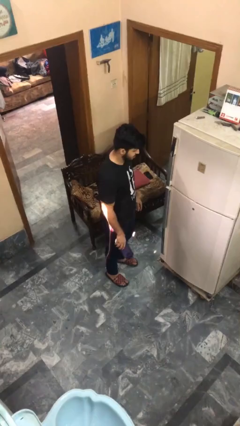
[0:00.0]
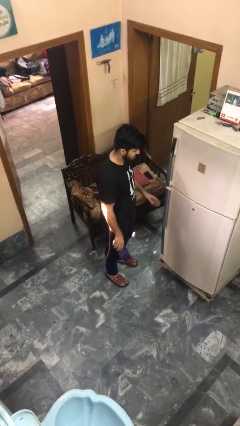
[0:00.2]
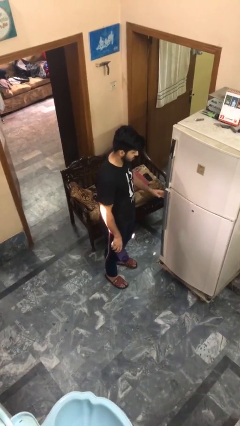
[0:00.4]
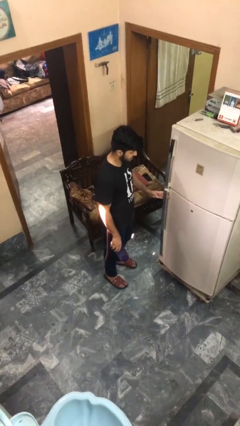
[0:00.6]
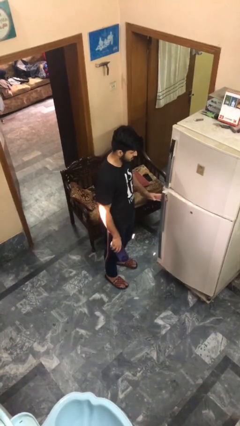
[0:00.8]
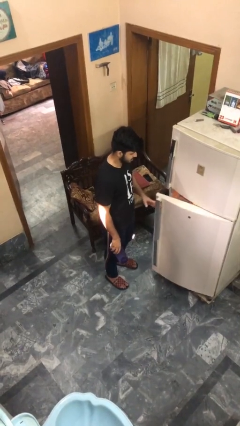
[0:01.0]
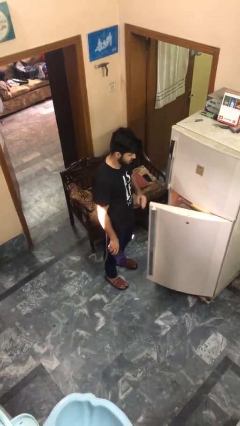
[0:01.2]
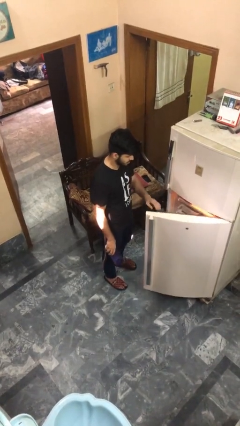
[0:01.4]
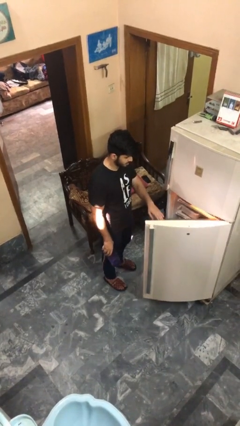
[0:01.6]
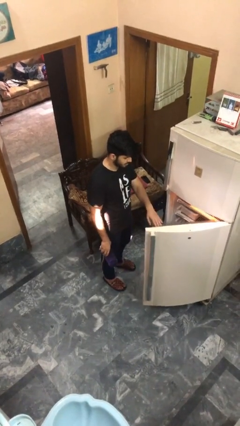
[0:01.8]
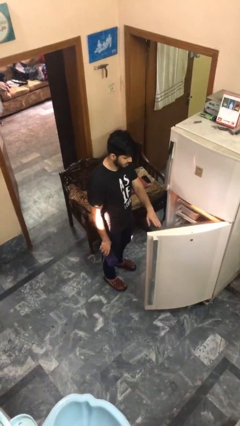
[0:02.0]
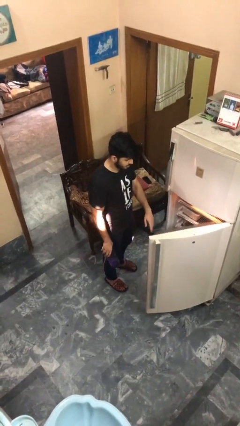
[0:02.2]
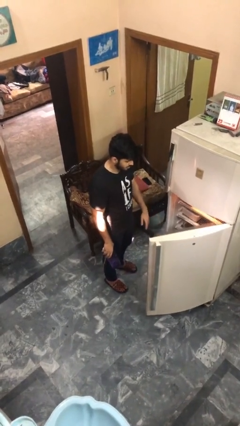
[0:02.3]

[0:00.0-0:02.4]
person opens refrigerator

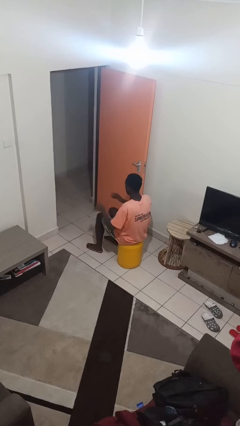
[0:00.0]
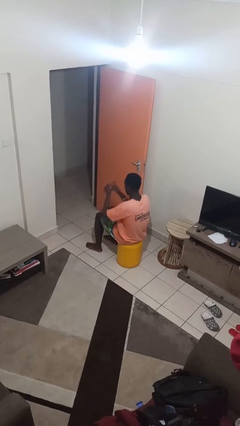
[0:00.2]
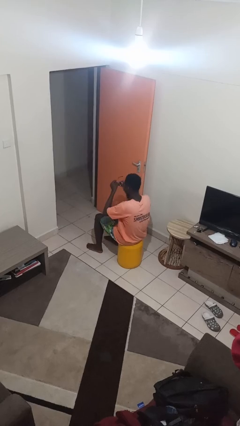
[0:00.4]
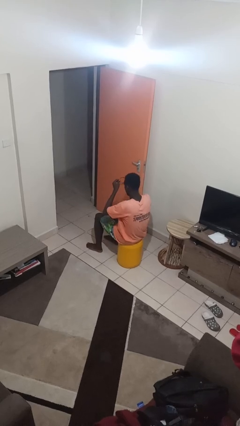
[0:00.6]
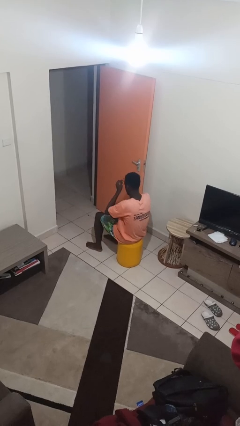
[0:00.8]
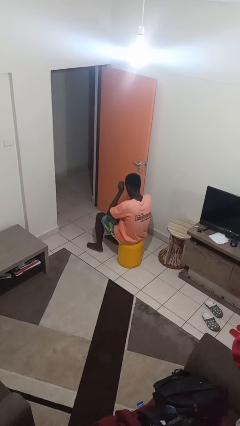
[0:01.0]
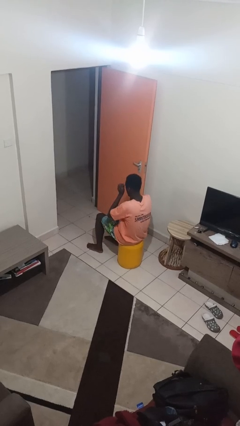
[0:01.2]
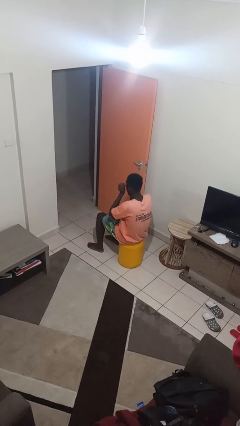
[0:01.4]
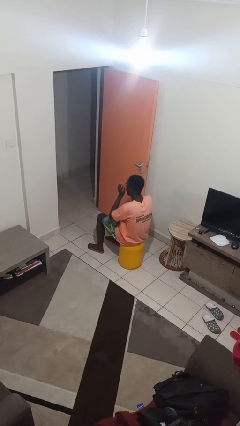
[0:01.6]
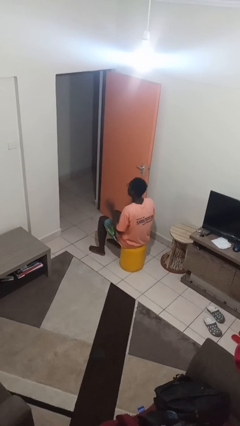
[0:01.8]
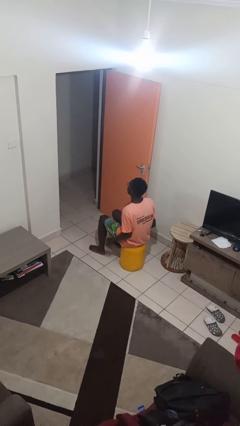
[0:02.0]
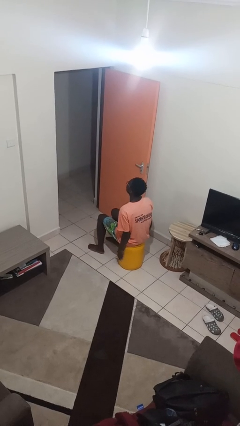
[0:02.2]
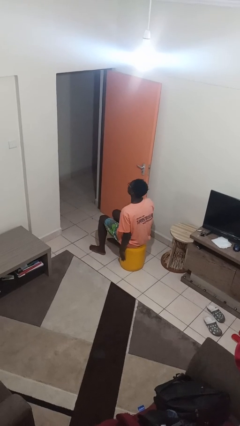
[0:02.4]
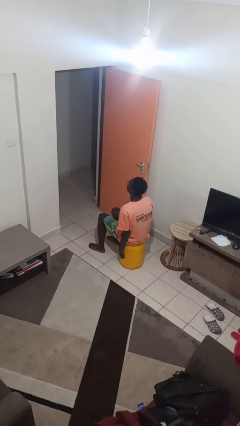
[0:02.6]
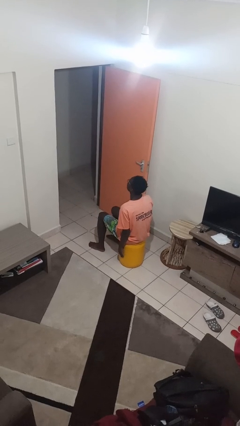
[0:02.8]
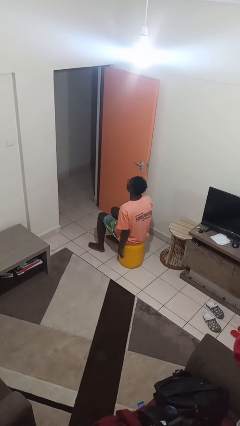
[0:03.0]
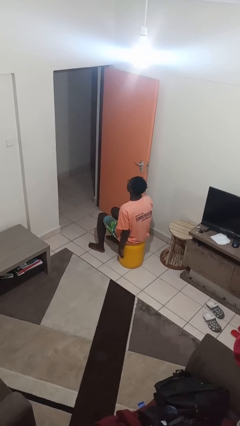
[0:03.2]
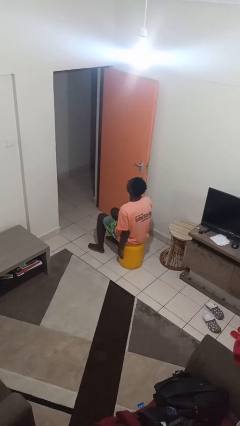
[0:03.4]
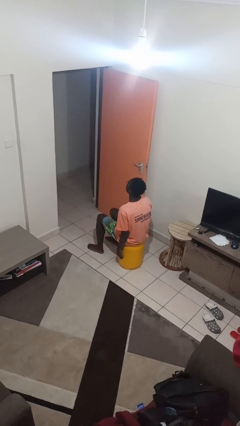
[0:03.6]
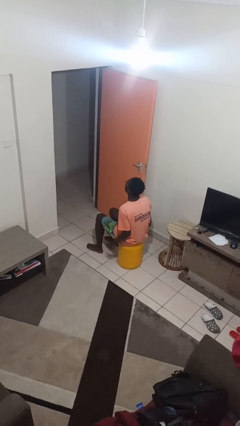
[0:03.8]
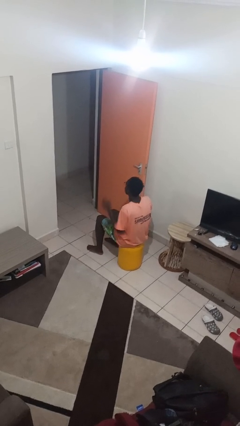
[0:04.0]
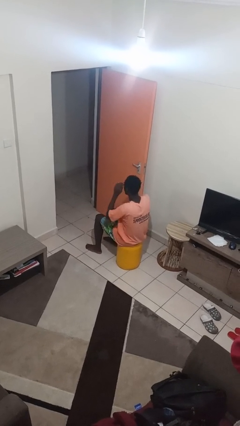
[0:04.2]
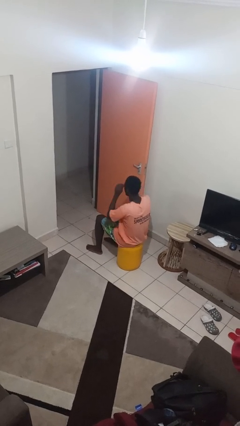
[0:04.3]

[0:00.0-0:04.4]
person puts on glasses

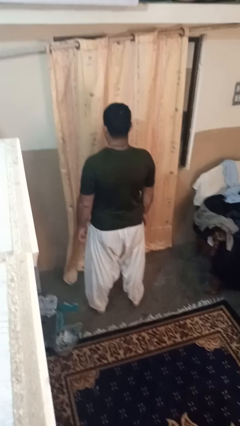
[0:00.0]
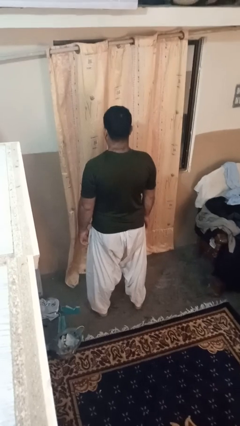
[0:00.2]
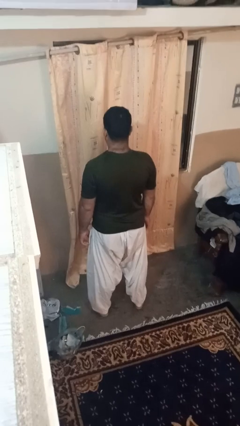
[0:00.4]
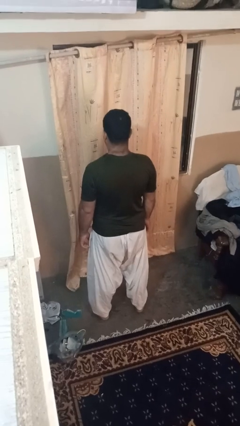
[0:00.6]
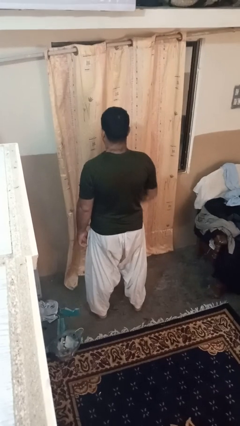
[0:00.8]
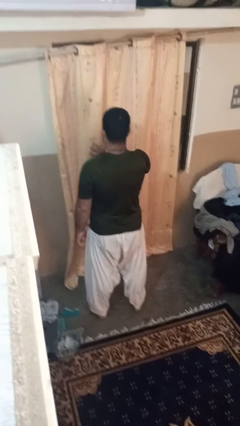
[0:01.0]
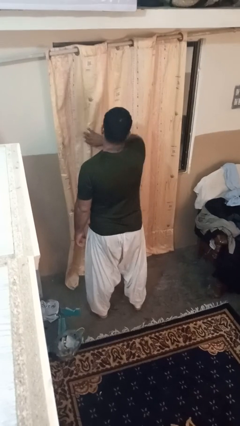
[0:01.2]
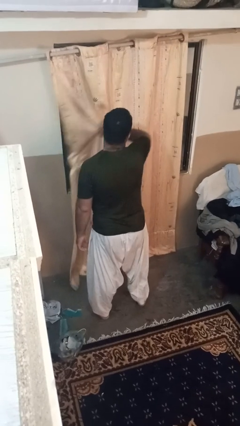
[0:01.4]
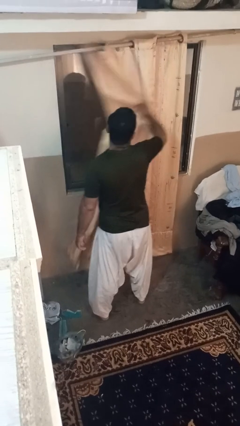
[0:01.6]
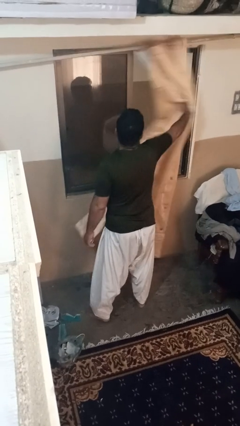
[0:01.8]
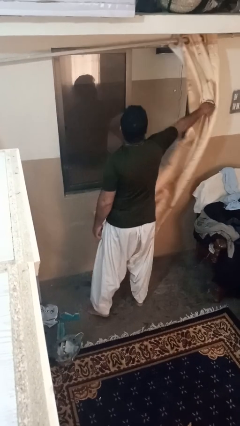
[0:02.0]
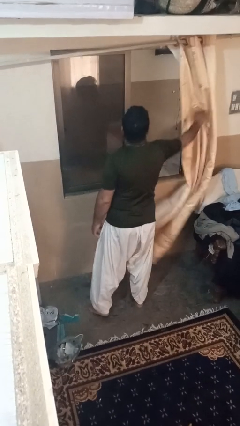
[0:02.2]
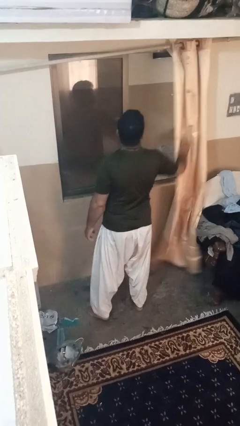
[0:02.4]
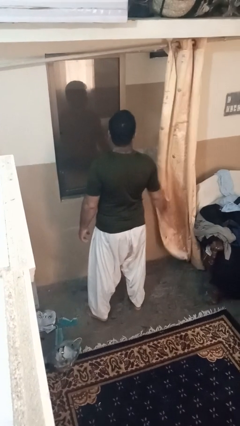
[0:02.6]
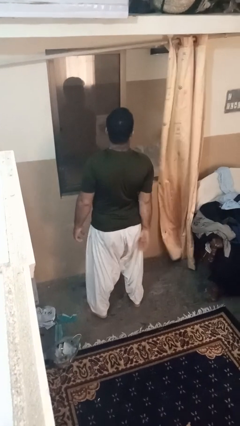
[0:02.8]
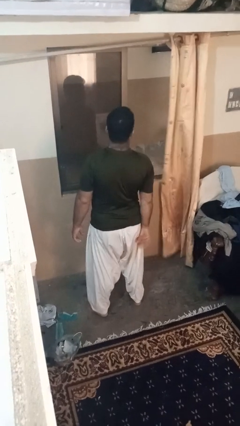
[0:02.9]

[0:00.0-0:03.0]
person opens curtains

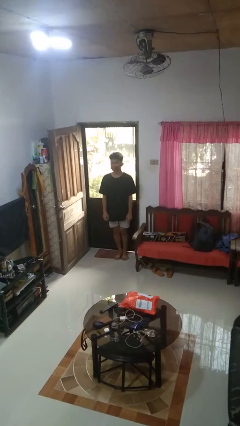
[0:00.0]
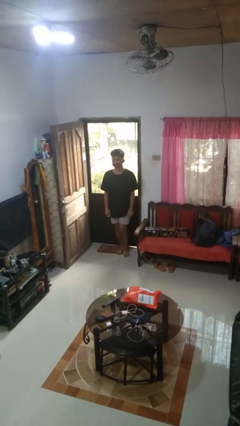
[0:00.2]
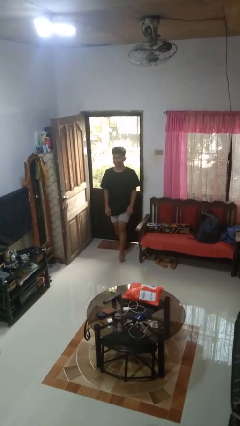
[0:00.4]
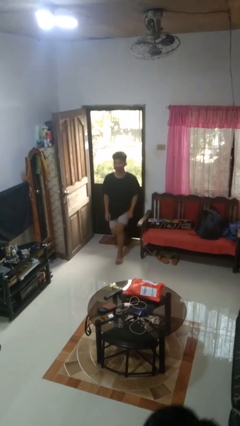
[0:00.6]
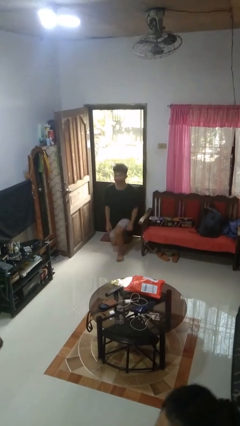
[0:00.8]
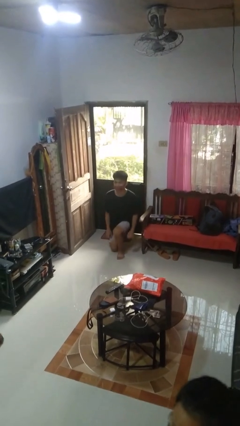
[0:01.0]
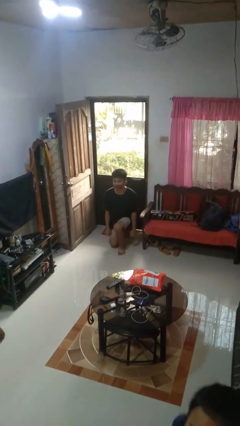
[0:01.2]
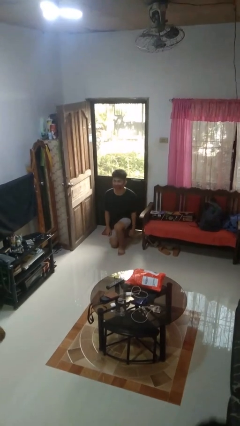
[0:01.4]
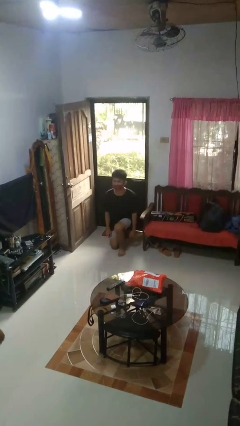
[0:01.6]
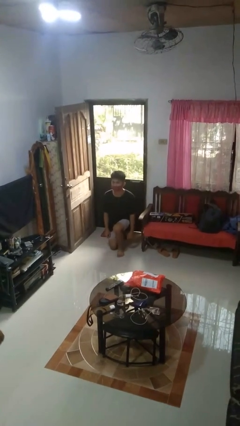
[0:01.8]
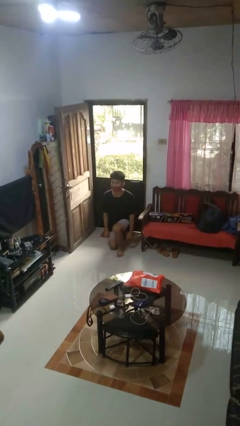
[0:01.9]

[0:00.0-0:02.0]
person kneels

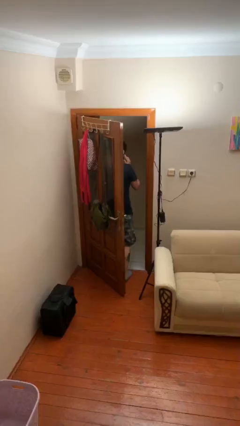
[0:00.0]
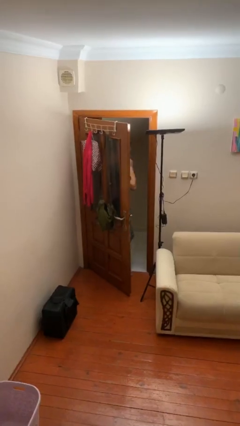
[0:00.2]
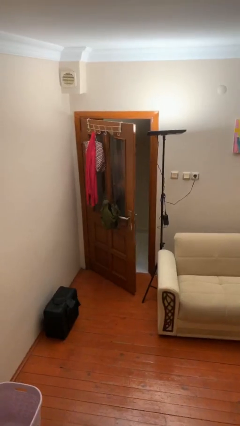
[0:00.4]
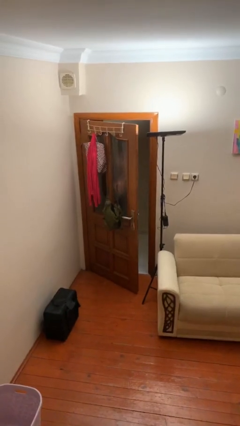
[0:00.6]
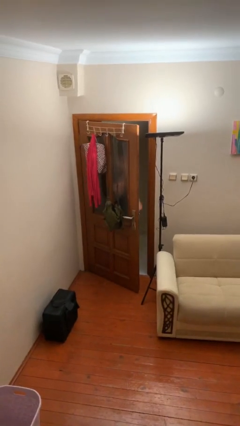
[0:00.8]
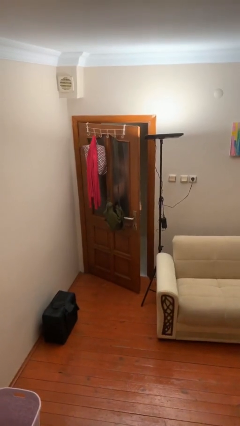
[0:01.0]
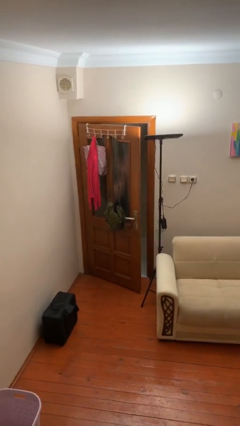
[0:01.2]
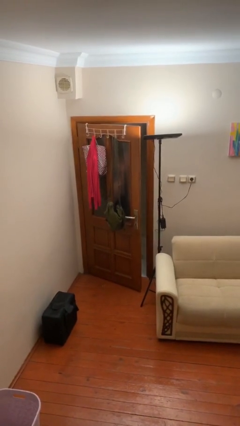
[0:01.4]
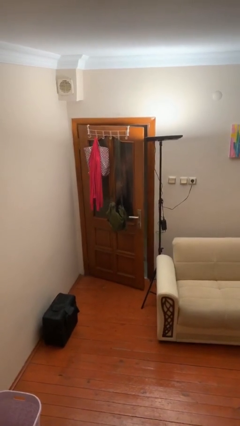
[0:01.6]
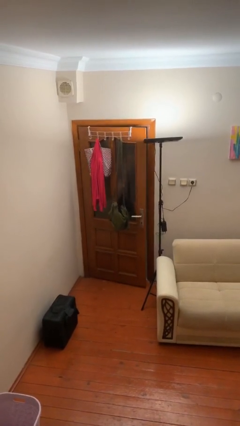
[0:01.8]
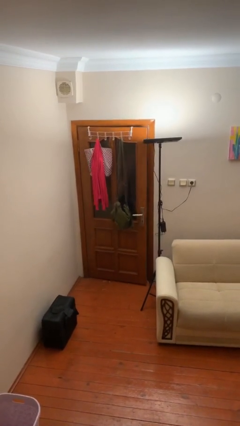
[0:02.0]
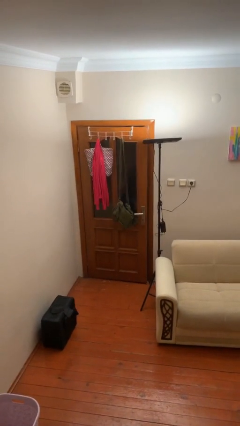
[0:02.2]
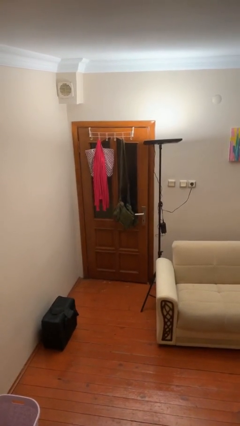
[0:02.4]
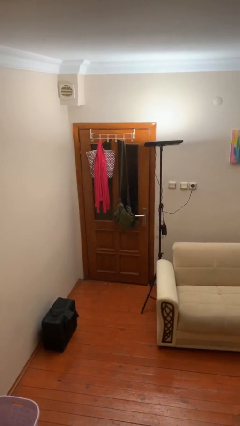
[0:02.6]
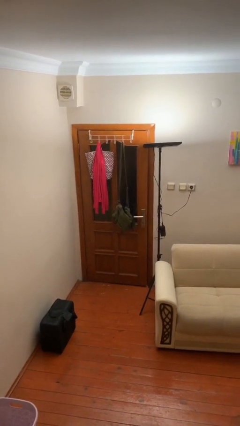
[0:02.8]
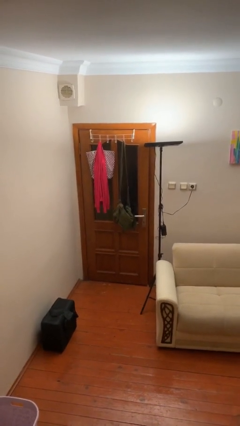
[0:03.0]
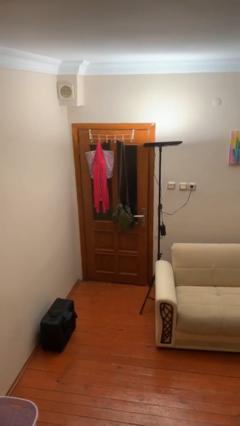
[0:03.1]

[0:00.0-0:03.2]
person closes facility door

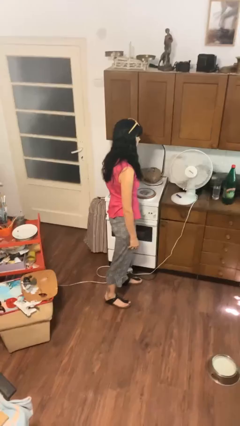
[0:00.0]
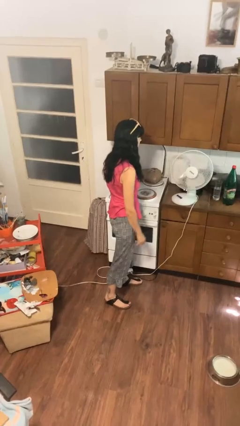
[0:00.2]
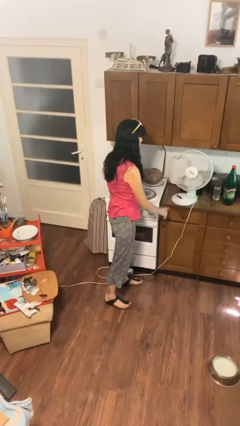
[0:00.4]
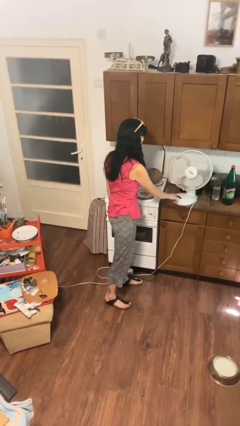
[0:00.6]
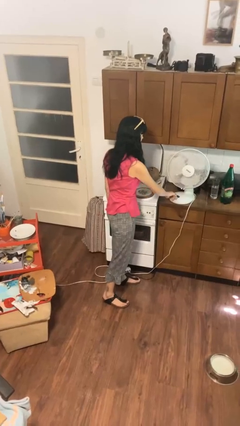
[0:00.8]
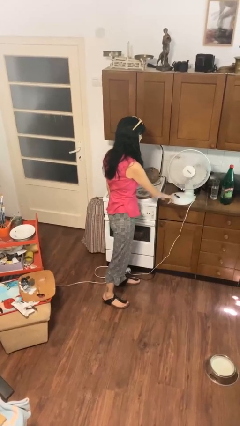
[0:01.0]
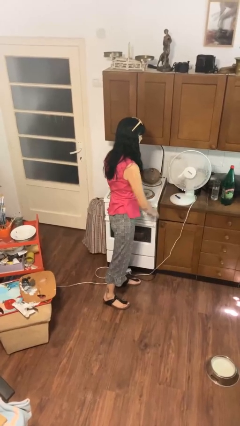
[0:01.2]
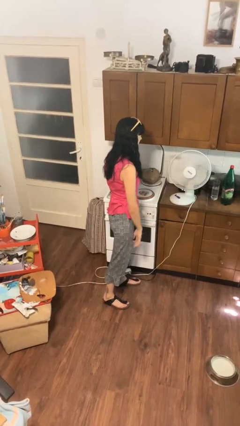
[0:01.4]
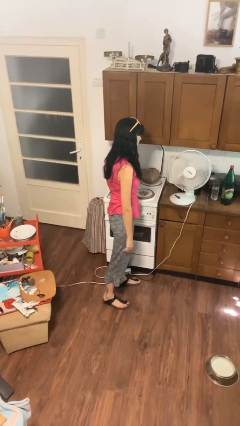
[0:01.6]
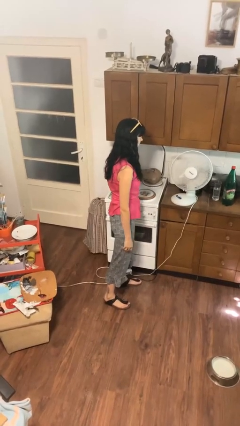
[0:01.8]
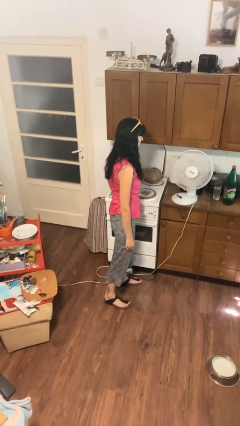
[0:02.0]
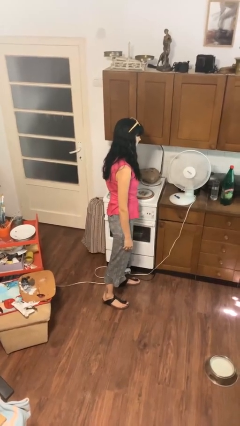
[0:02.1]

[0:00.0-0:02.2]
person turns on fan

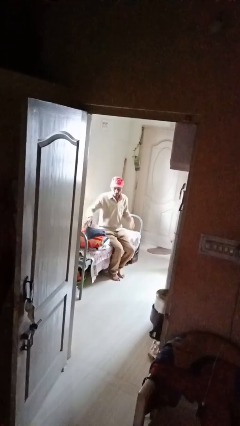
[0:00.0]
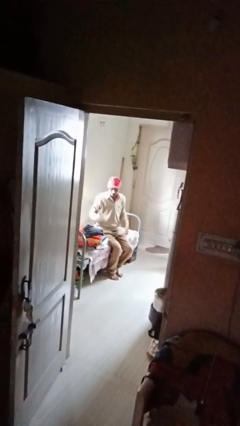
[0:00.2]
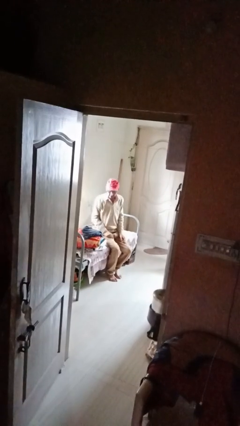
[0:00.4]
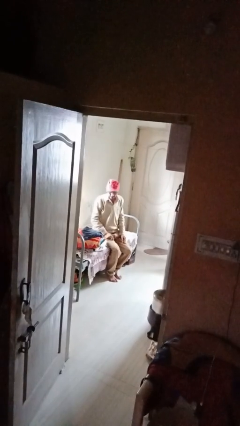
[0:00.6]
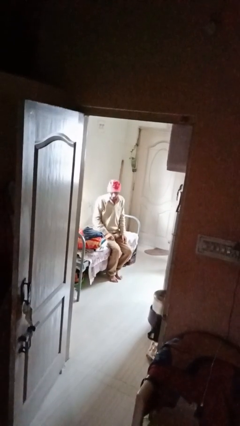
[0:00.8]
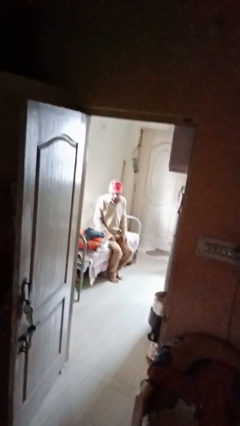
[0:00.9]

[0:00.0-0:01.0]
person folds pants
